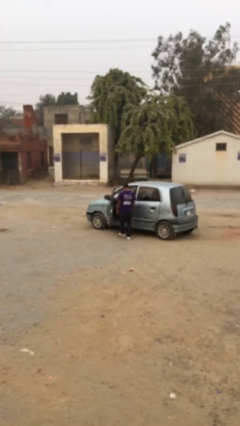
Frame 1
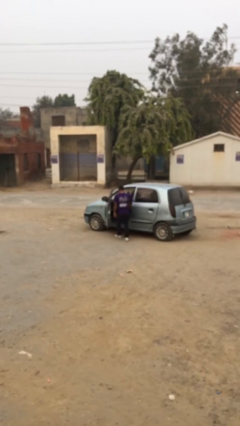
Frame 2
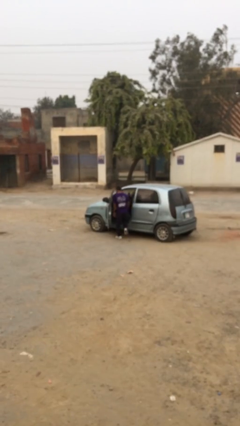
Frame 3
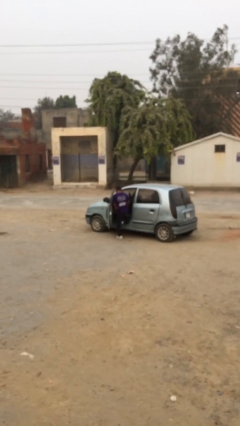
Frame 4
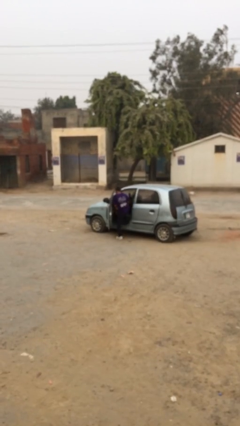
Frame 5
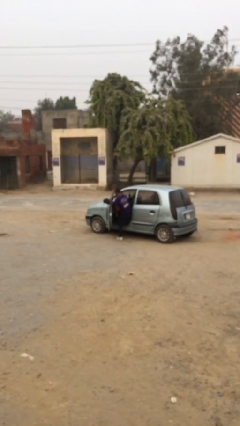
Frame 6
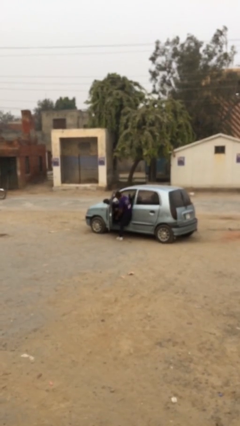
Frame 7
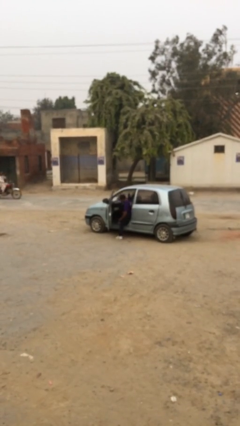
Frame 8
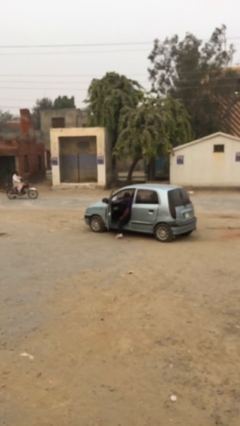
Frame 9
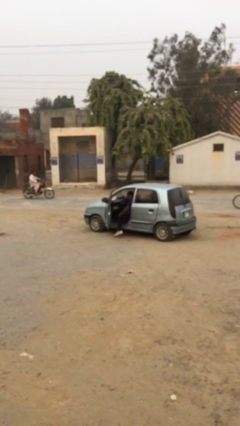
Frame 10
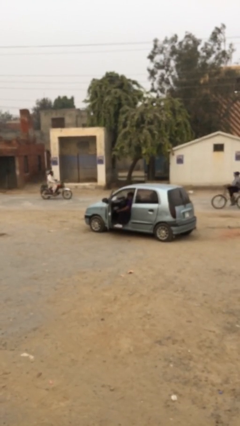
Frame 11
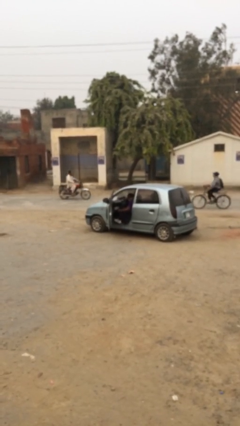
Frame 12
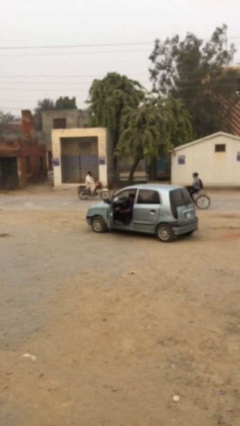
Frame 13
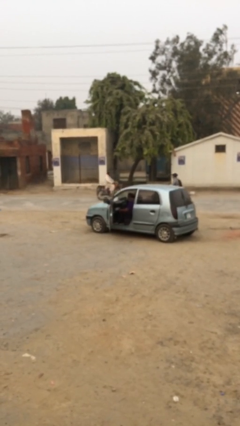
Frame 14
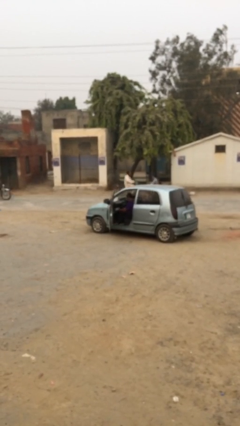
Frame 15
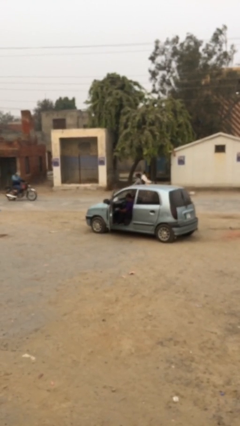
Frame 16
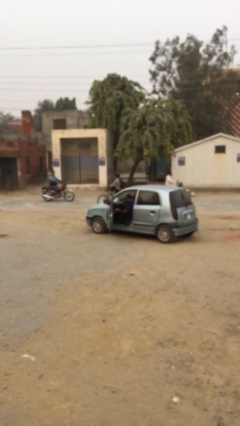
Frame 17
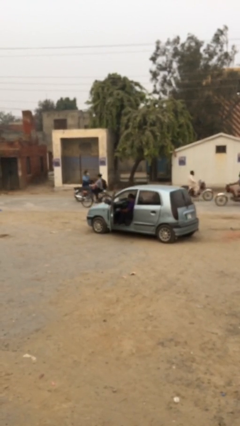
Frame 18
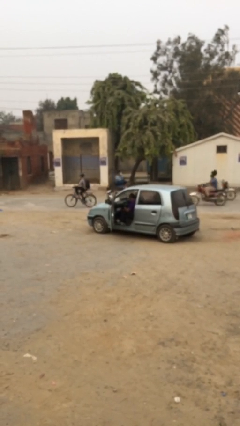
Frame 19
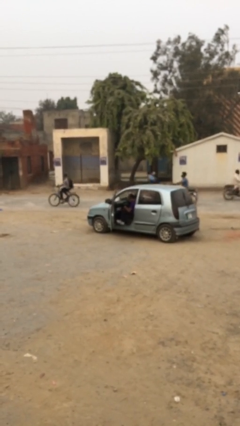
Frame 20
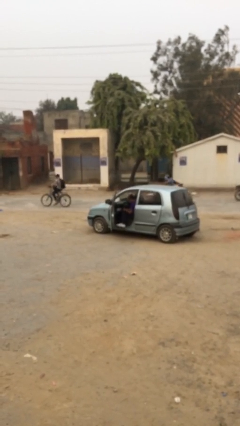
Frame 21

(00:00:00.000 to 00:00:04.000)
person enters car

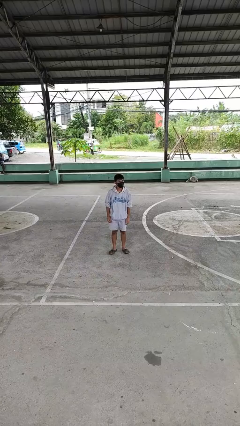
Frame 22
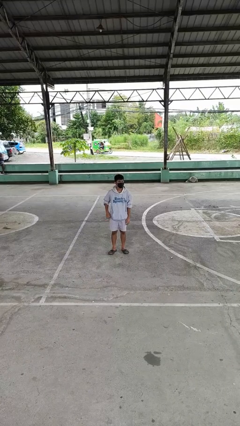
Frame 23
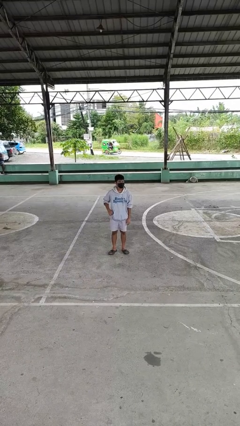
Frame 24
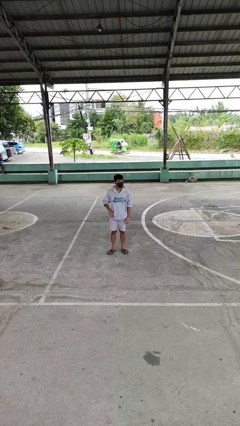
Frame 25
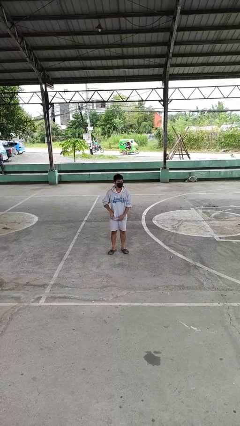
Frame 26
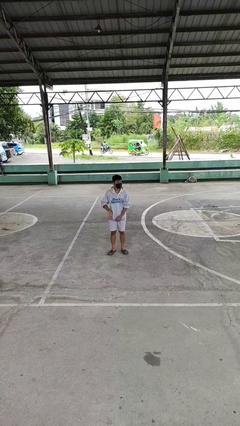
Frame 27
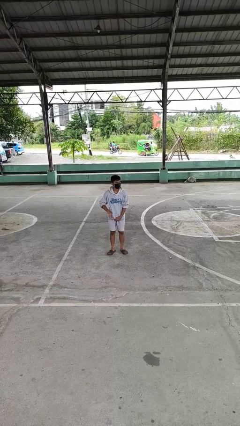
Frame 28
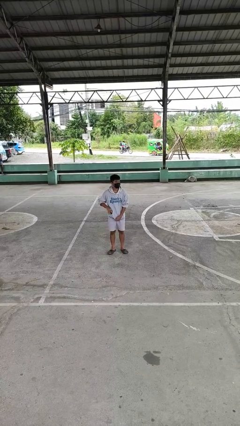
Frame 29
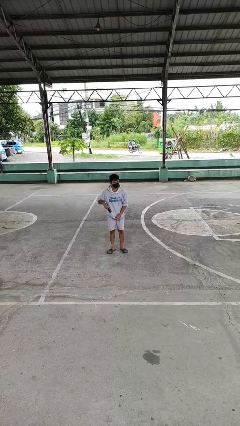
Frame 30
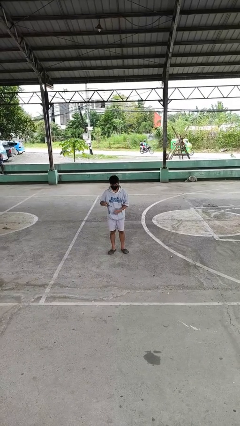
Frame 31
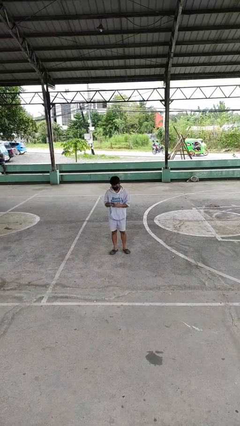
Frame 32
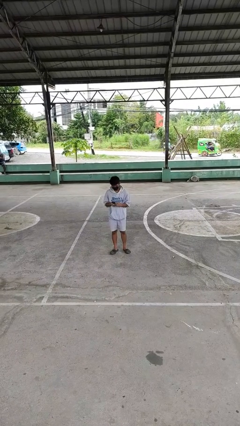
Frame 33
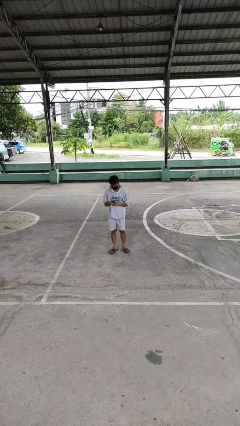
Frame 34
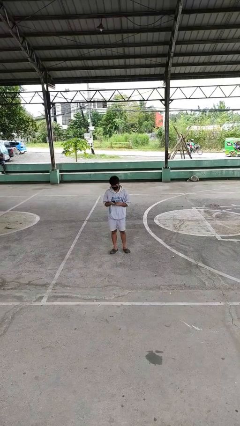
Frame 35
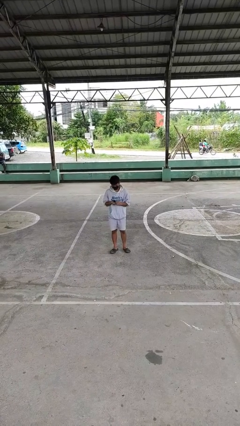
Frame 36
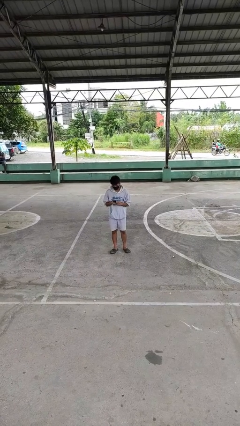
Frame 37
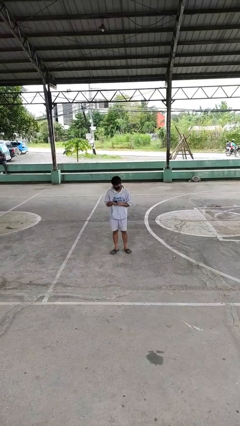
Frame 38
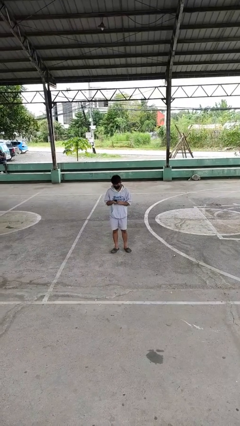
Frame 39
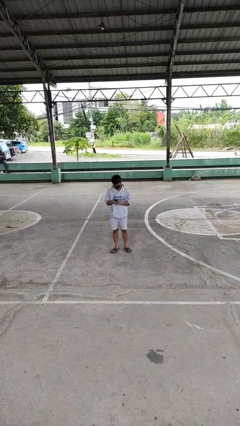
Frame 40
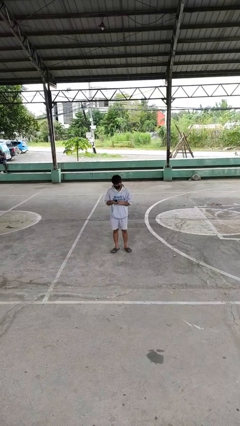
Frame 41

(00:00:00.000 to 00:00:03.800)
person takes phone from pocket

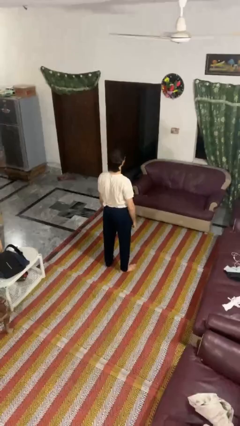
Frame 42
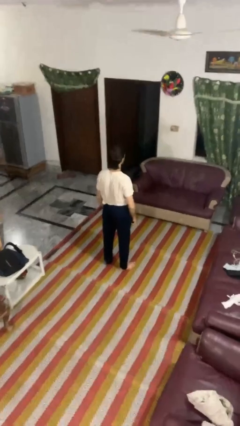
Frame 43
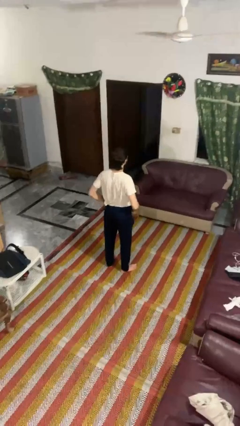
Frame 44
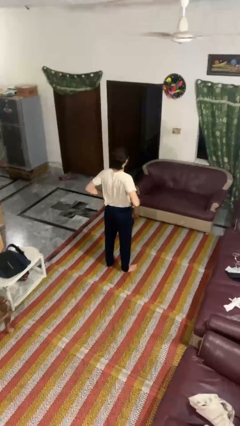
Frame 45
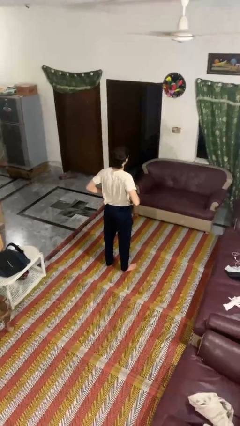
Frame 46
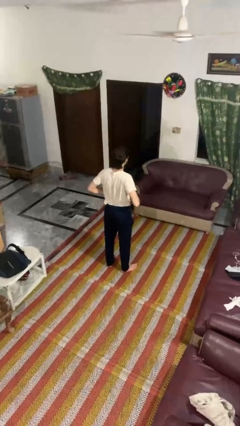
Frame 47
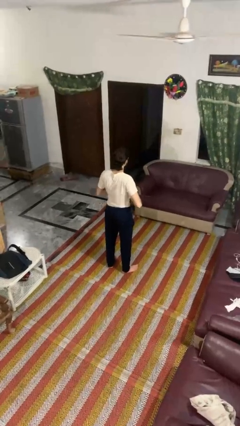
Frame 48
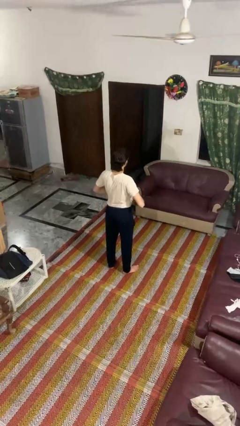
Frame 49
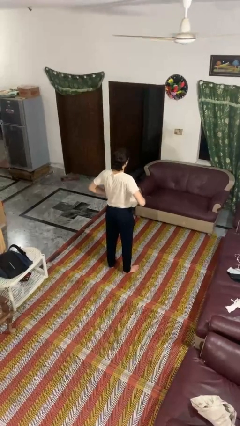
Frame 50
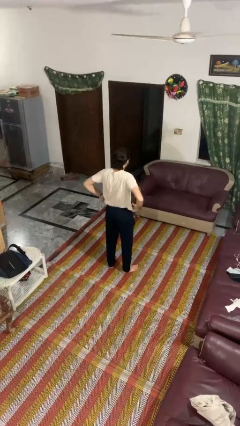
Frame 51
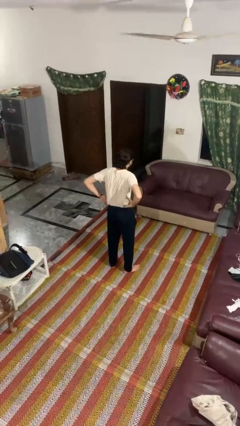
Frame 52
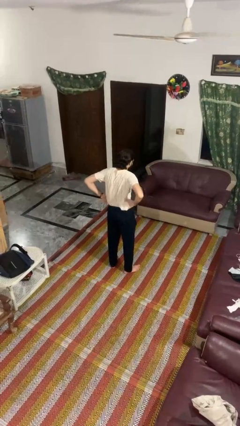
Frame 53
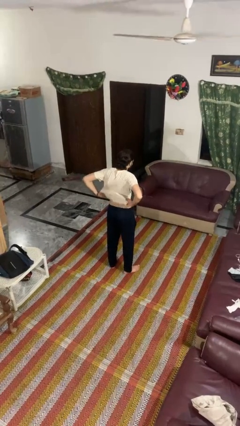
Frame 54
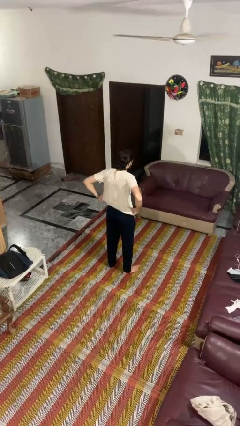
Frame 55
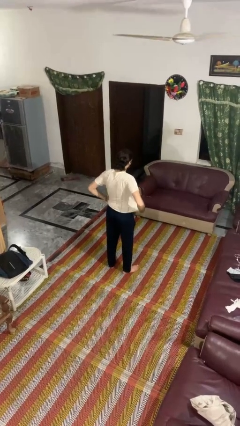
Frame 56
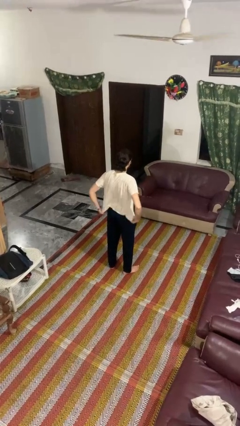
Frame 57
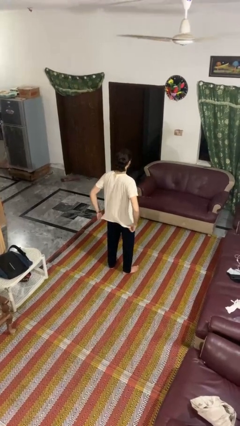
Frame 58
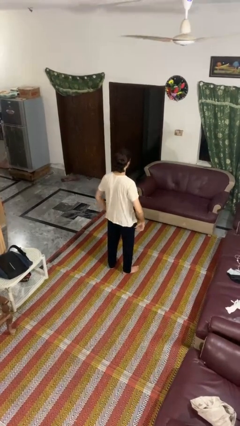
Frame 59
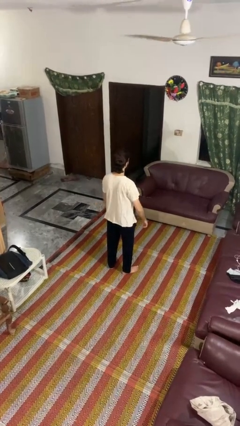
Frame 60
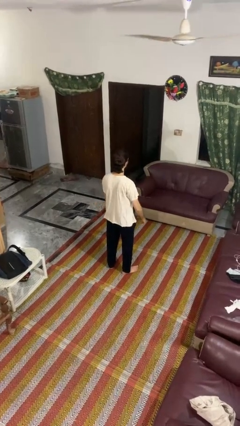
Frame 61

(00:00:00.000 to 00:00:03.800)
person untucks shirt

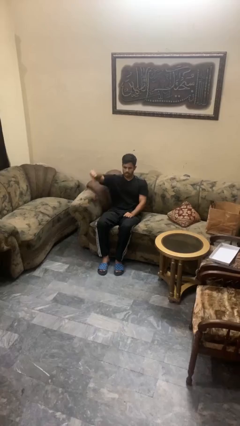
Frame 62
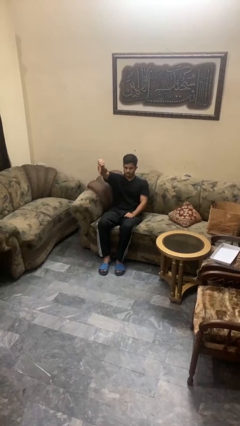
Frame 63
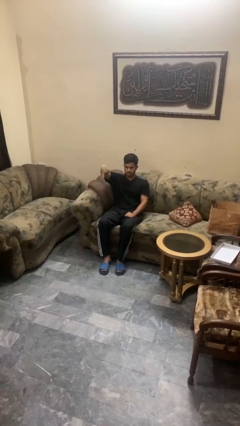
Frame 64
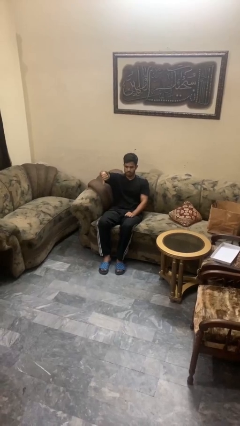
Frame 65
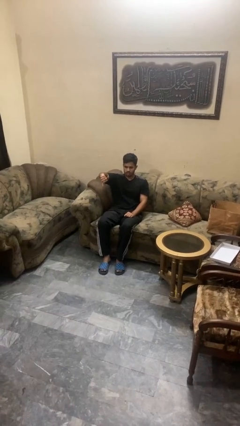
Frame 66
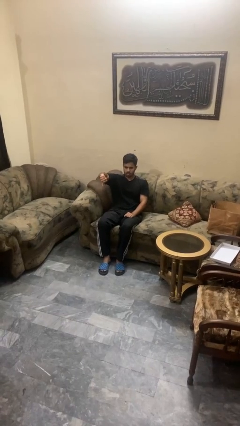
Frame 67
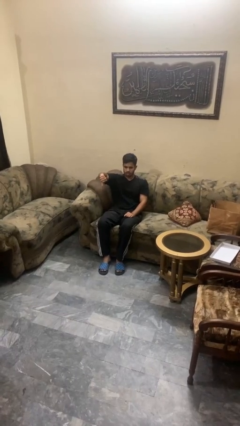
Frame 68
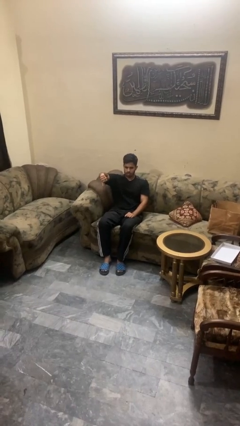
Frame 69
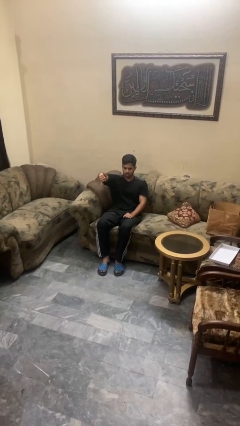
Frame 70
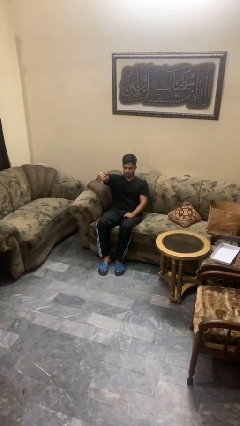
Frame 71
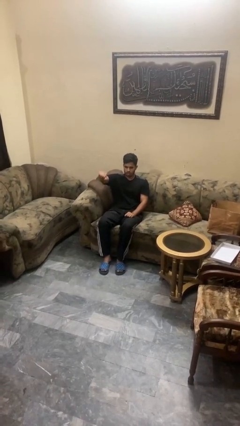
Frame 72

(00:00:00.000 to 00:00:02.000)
person gestures thumbs down

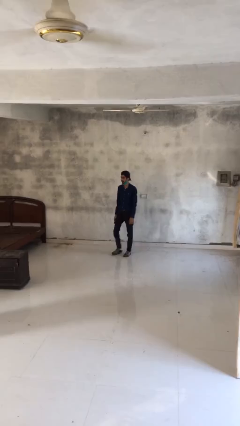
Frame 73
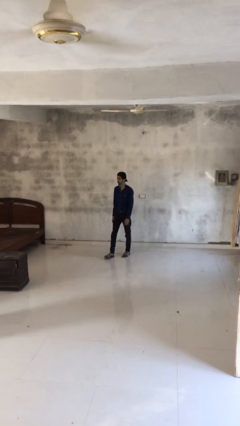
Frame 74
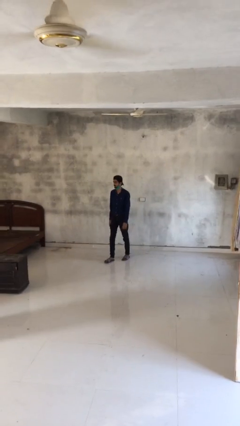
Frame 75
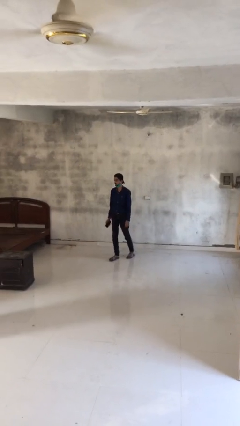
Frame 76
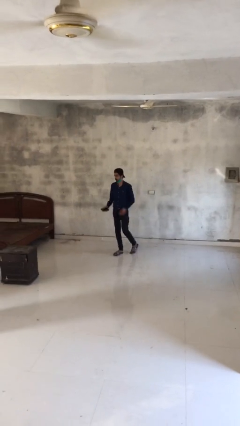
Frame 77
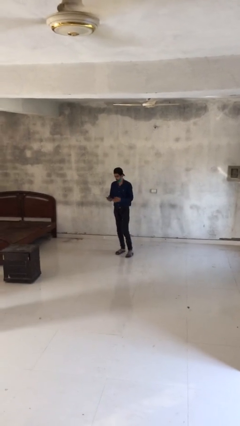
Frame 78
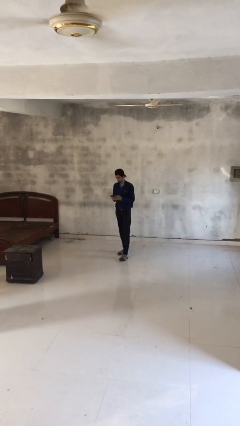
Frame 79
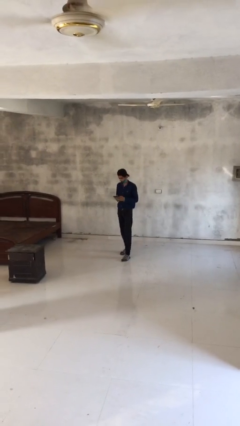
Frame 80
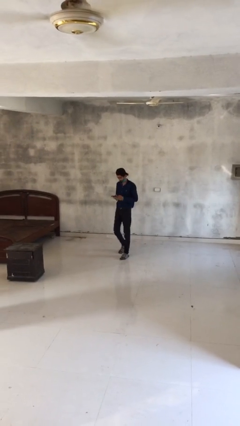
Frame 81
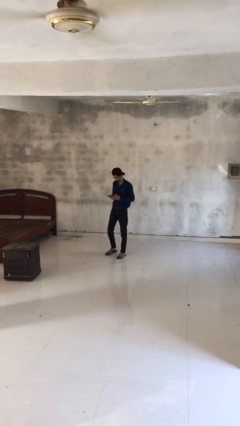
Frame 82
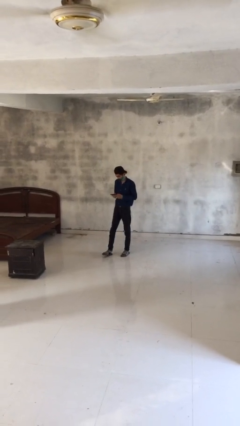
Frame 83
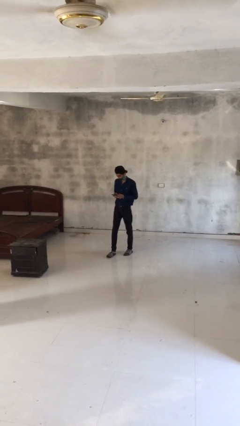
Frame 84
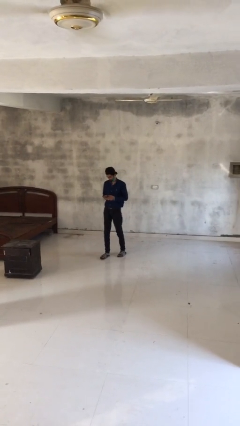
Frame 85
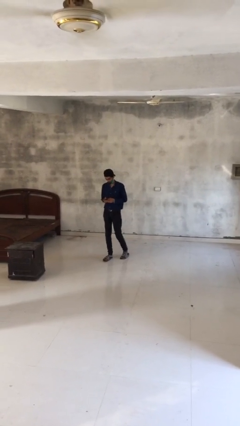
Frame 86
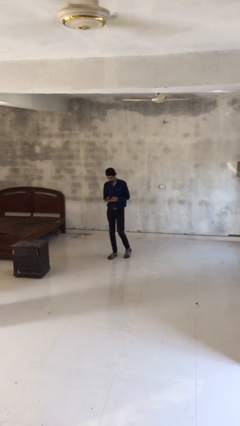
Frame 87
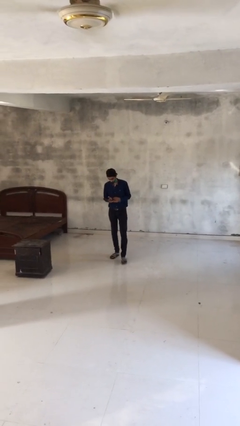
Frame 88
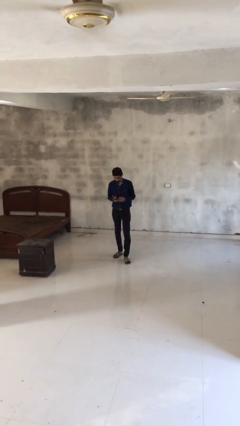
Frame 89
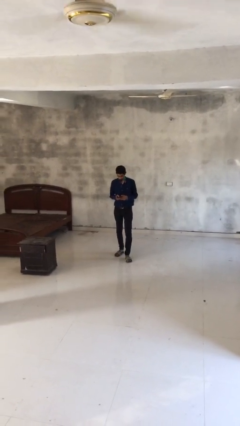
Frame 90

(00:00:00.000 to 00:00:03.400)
person texts on phone

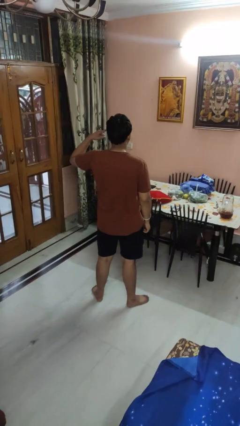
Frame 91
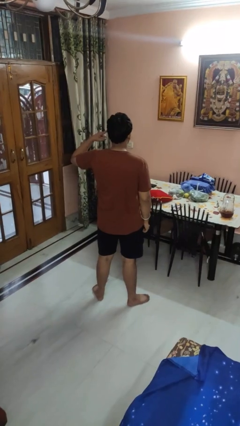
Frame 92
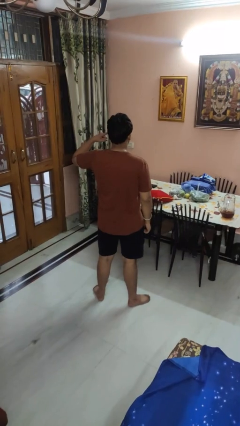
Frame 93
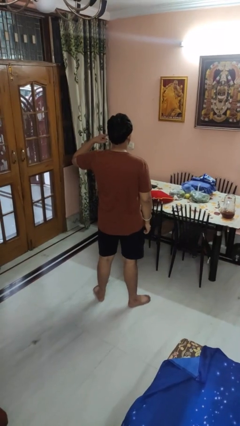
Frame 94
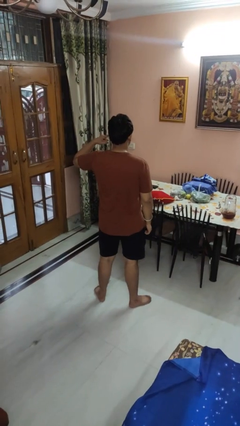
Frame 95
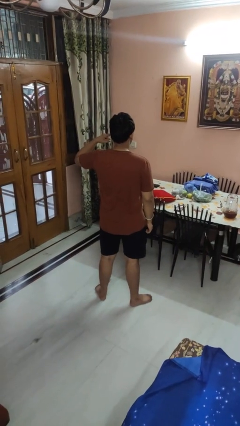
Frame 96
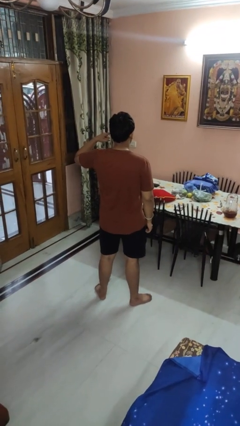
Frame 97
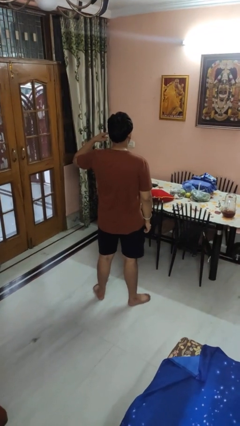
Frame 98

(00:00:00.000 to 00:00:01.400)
person gestures listen closely
